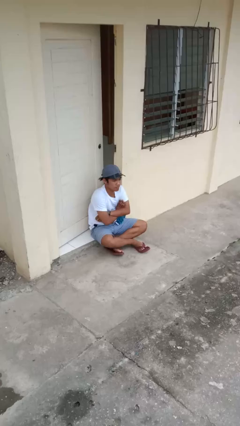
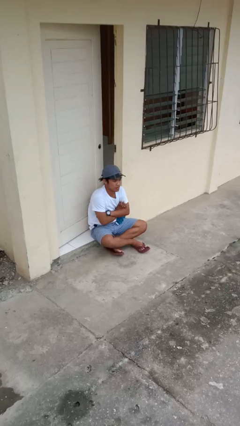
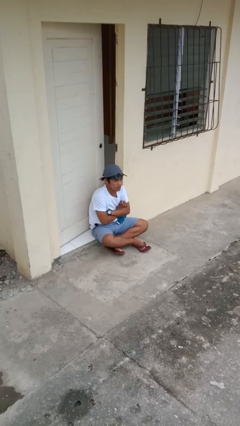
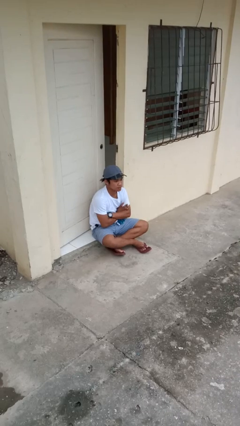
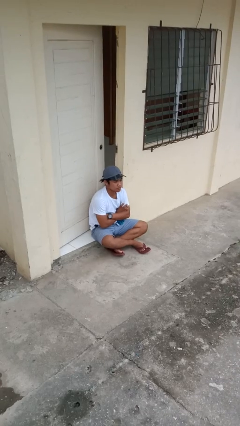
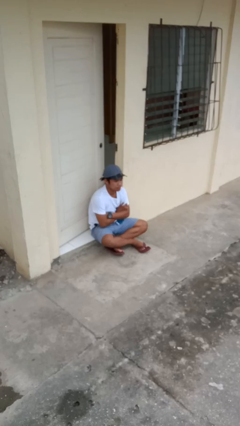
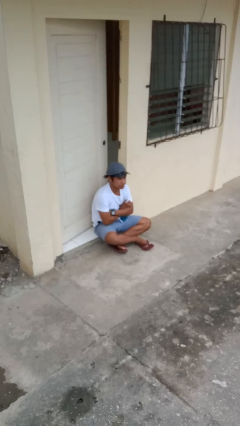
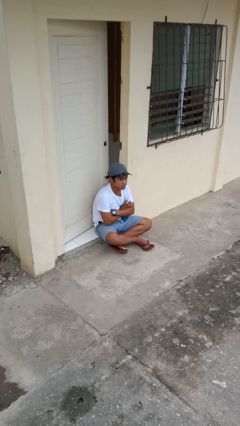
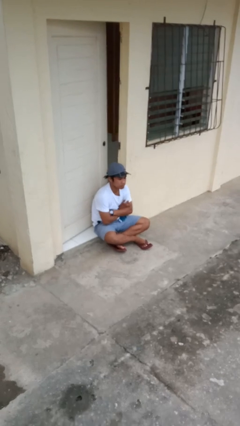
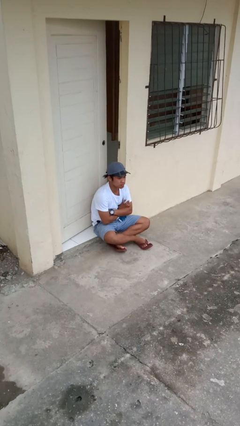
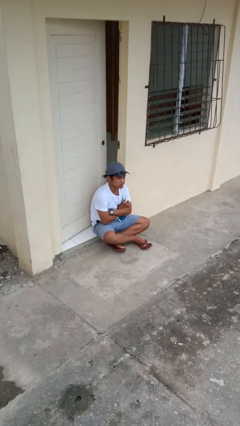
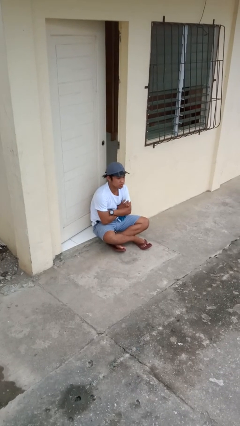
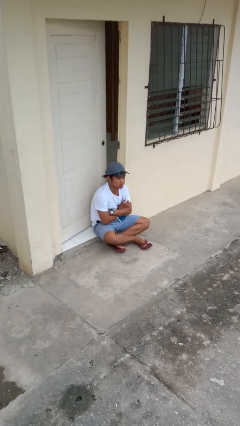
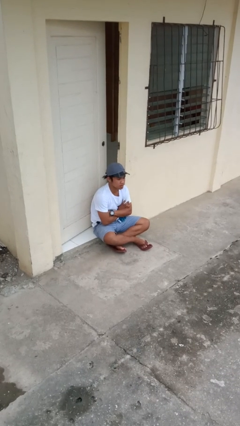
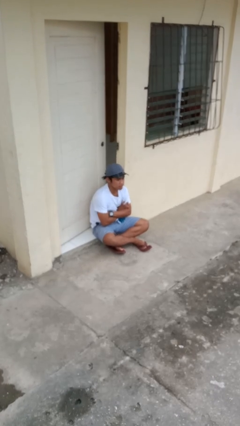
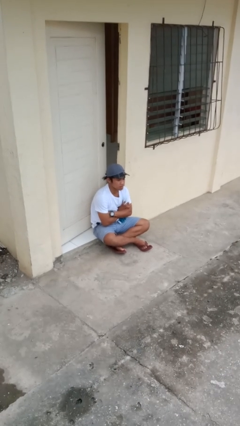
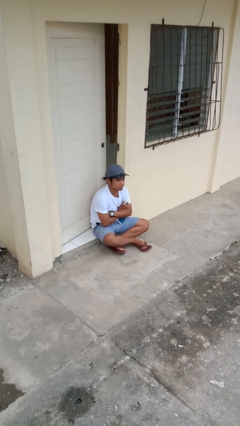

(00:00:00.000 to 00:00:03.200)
person crosses arms

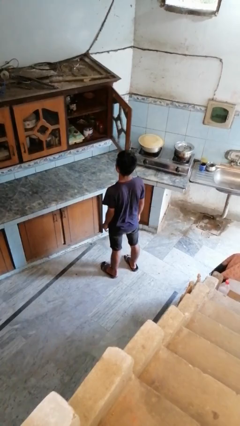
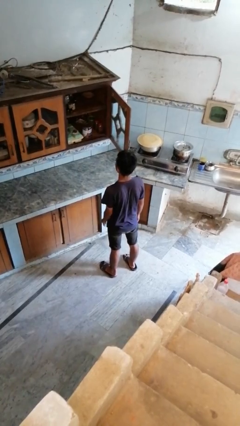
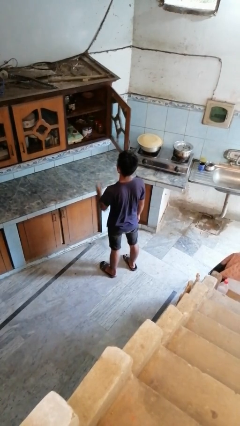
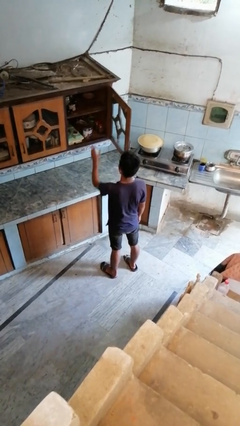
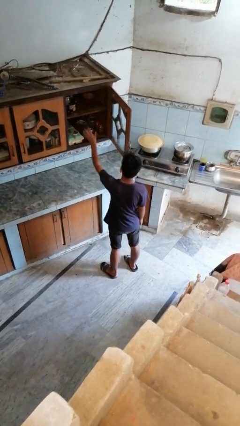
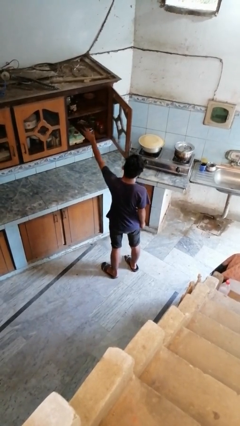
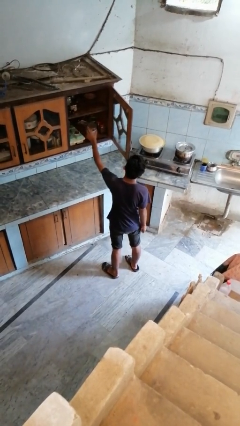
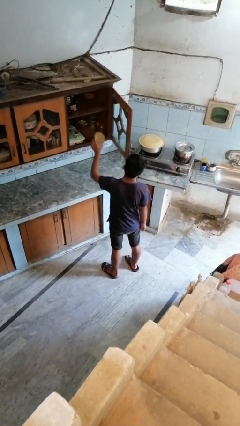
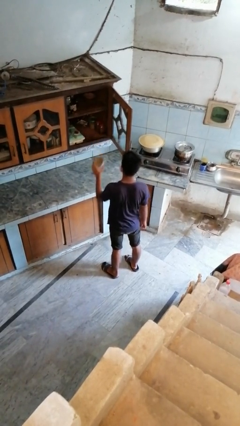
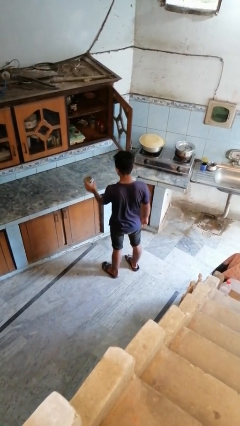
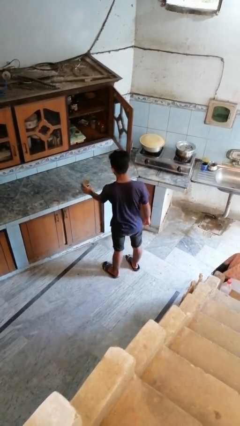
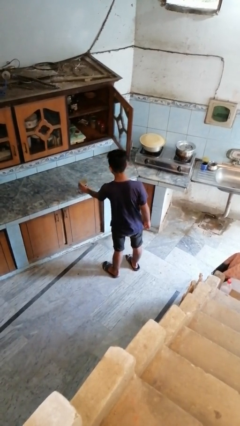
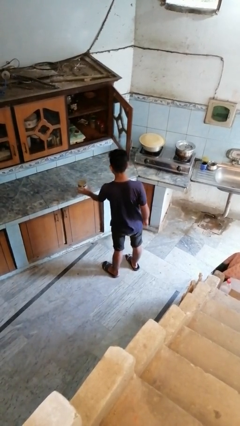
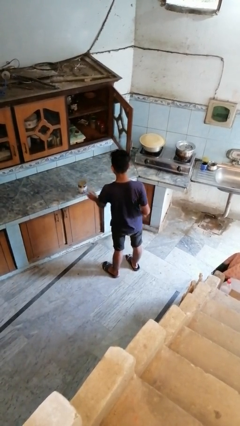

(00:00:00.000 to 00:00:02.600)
person takes object from cabinet

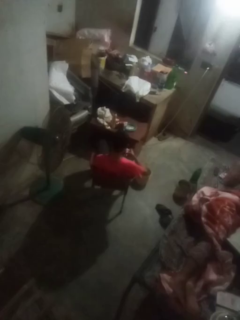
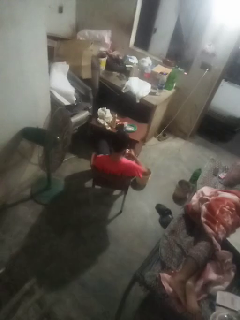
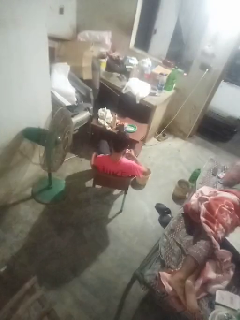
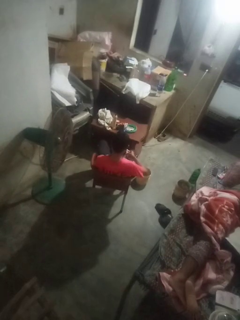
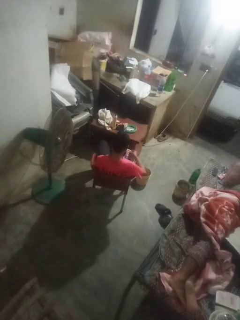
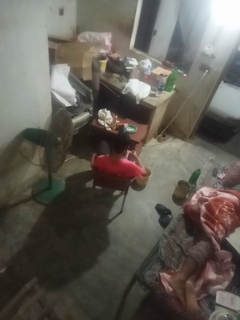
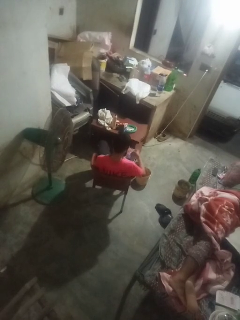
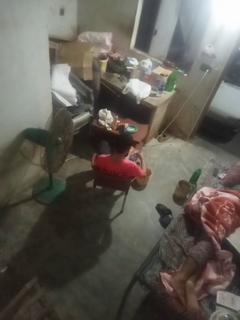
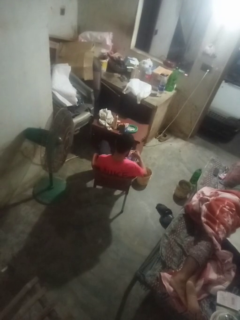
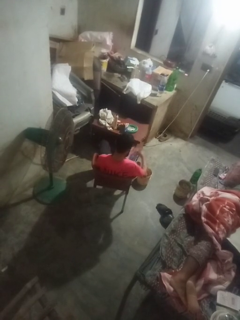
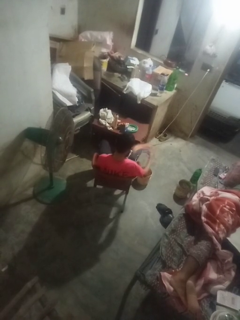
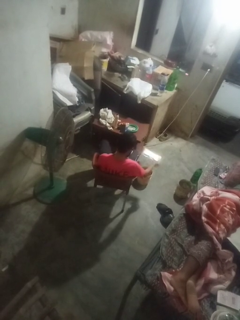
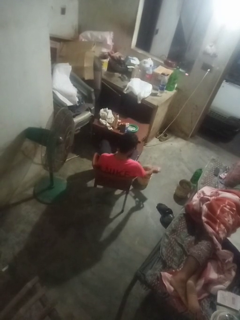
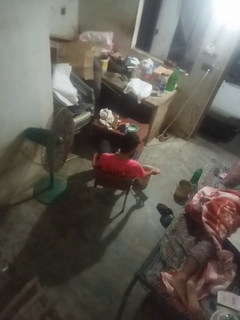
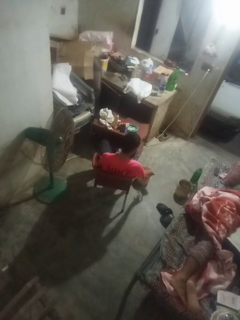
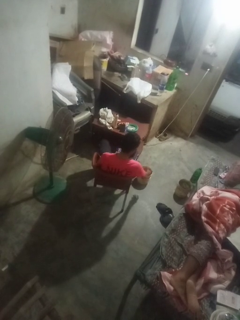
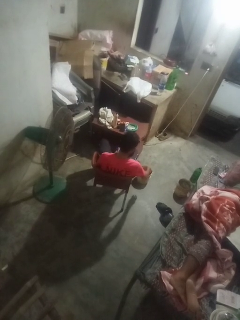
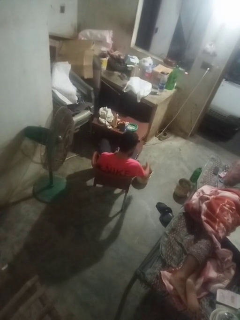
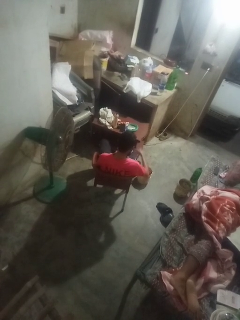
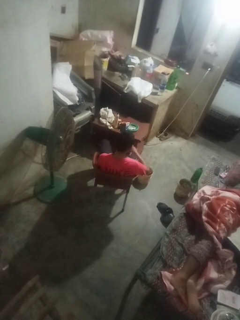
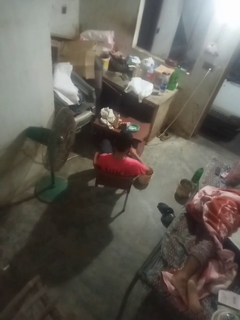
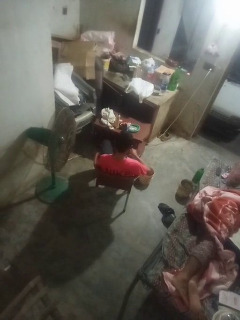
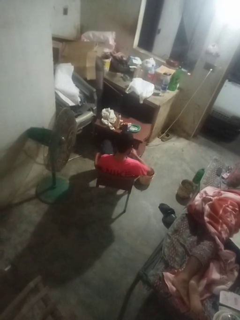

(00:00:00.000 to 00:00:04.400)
person discards trash

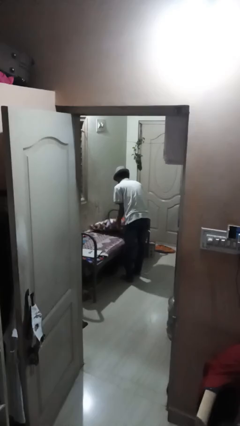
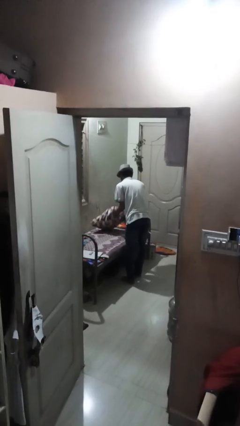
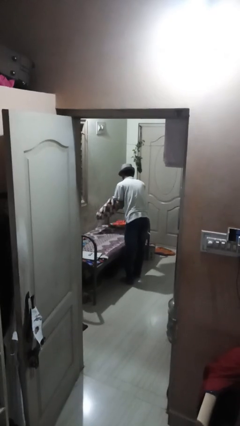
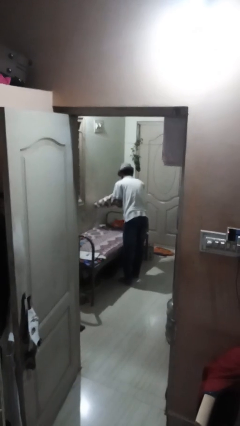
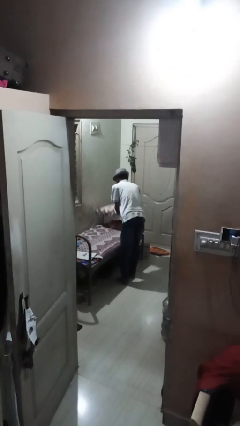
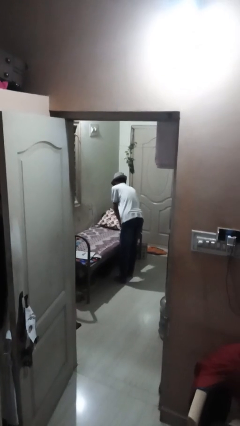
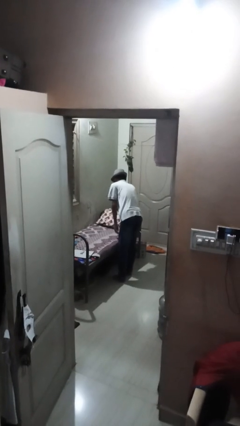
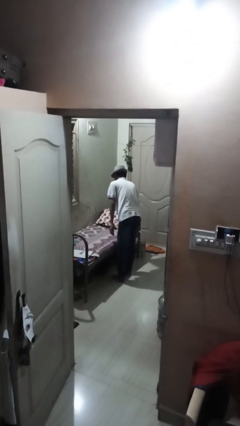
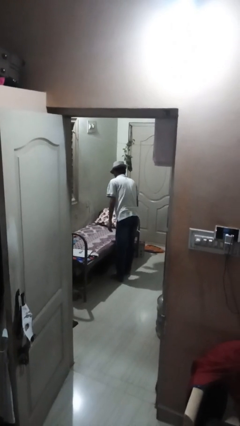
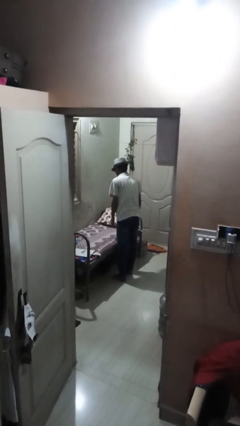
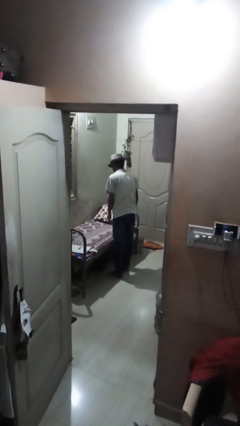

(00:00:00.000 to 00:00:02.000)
person makes bed

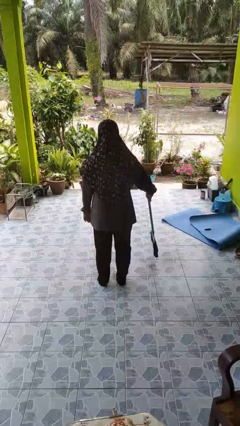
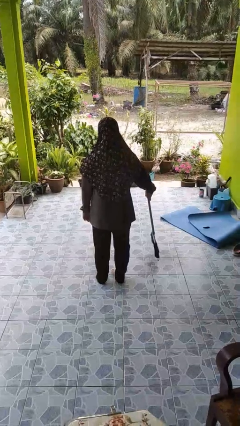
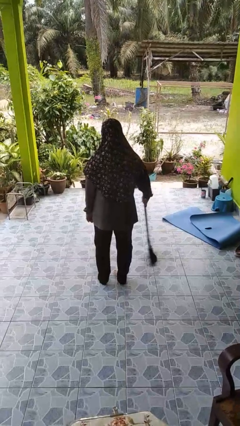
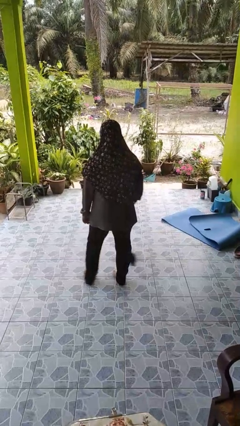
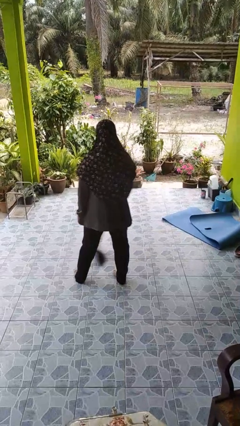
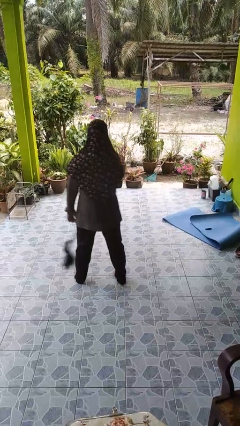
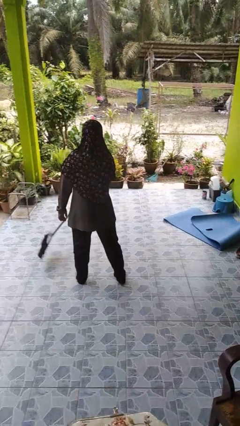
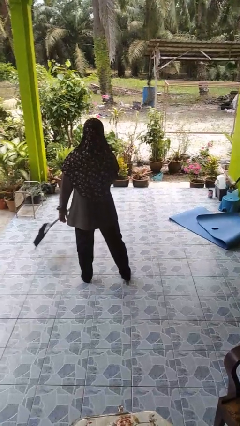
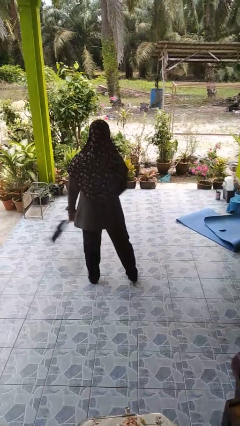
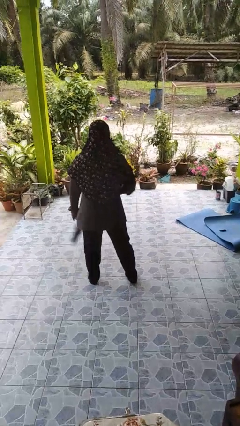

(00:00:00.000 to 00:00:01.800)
person sweeps floor

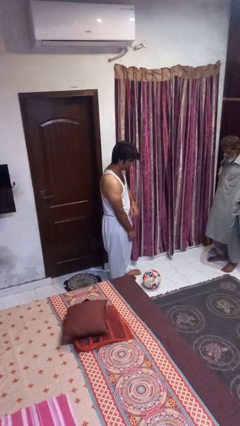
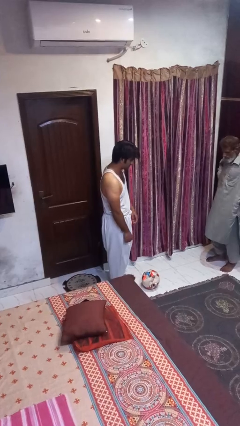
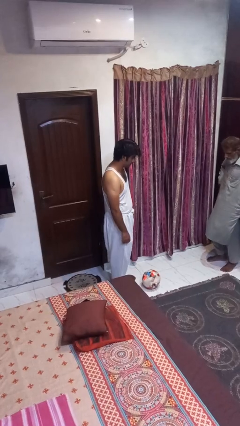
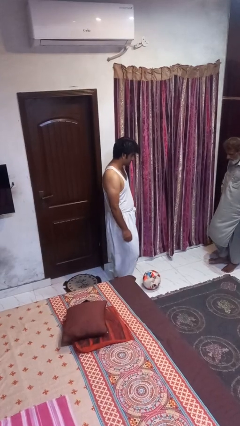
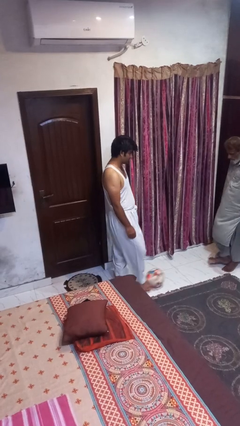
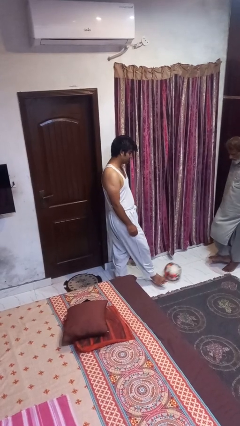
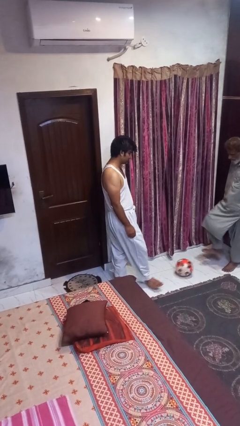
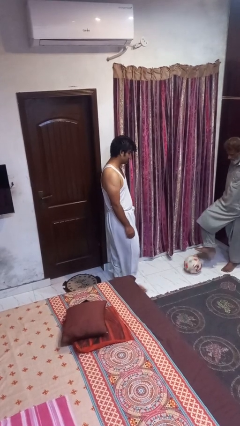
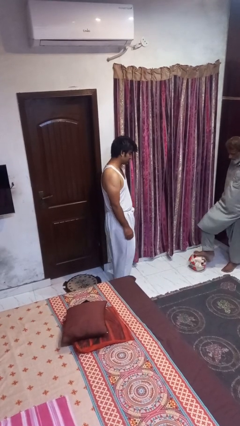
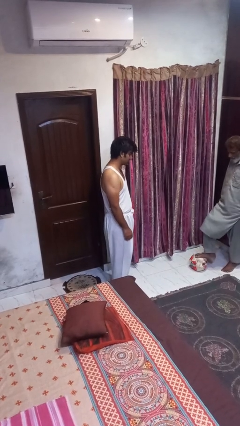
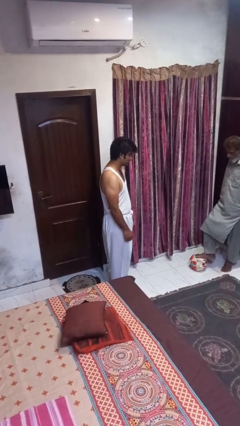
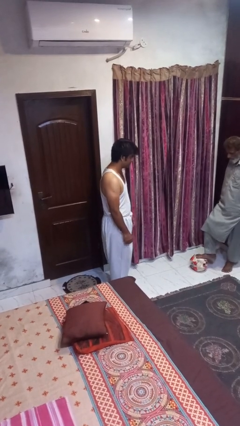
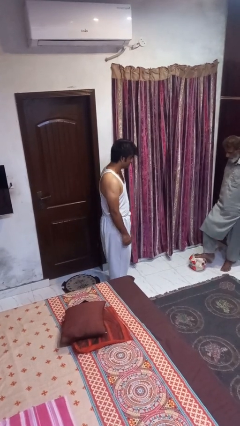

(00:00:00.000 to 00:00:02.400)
person kicks object to person

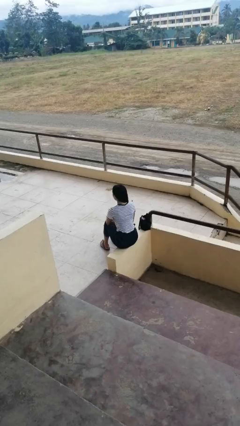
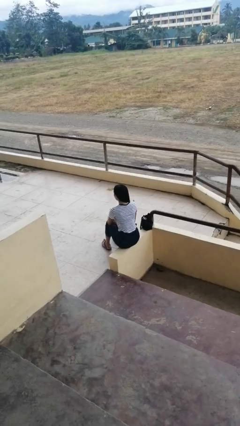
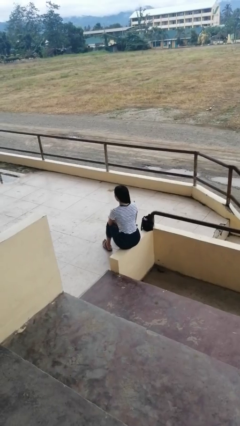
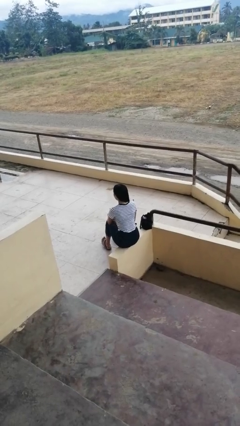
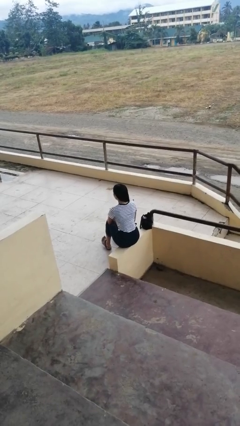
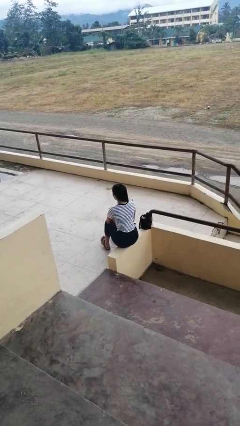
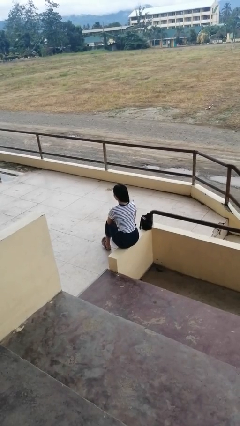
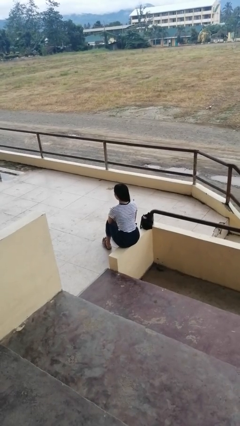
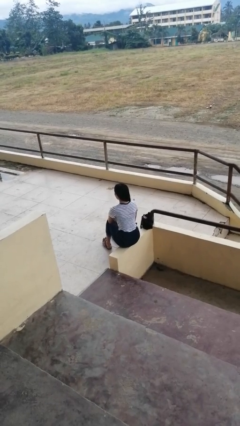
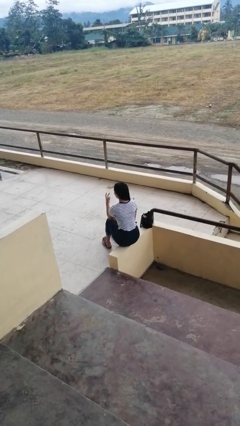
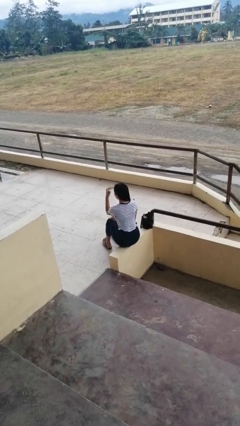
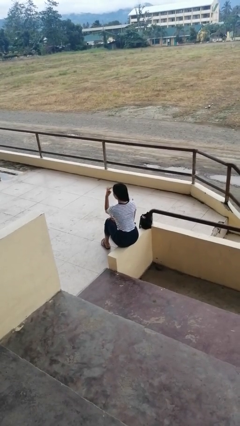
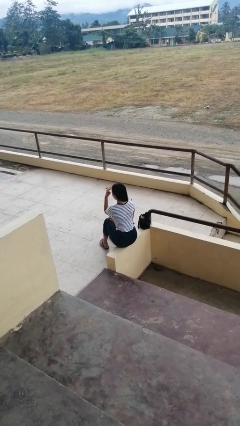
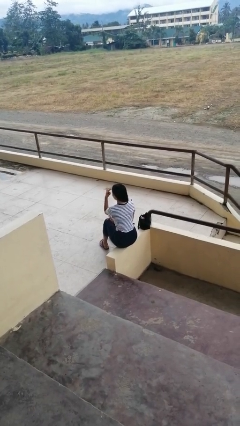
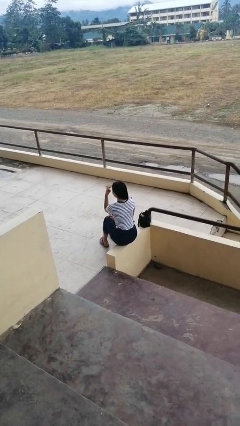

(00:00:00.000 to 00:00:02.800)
person gestures watch closely
